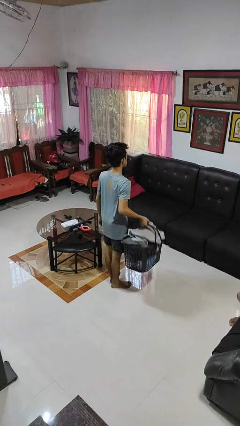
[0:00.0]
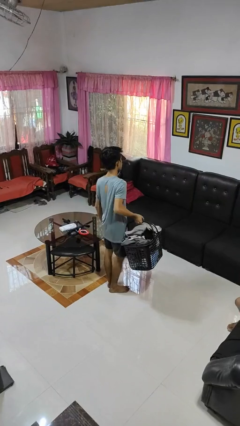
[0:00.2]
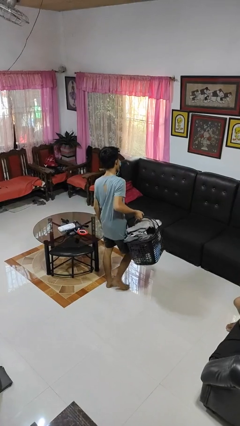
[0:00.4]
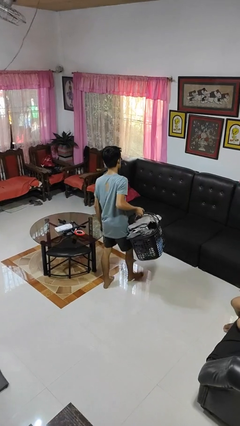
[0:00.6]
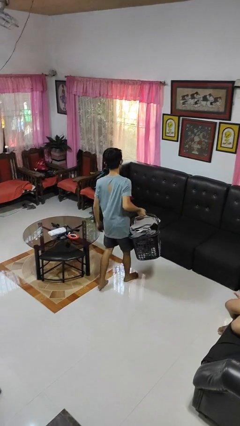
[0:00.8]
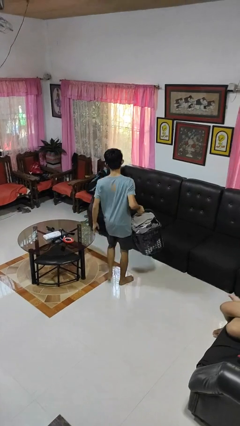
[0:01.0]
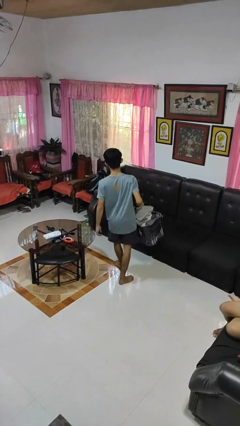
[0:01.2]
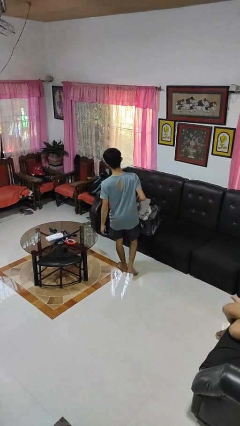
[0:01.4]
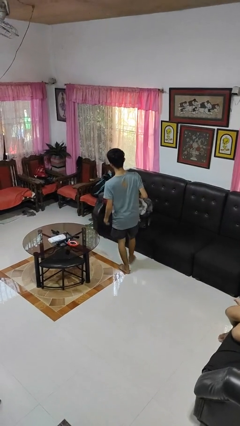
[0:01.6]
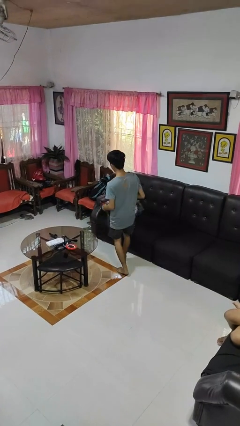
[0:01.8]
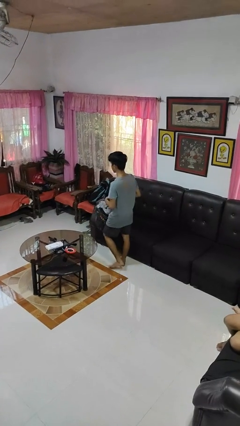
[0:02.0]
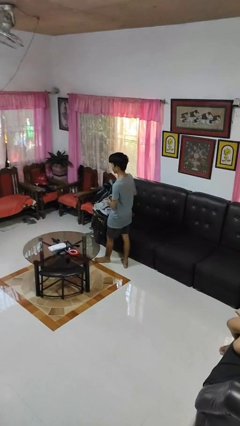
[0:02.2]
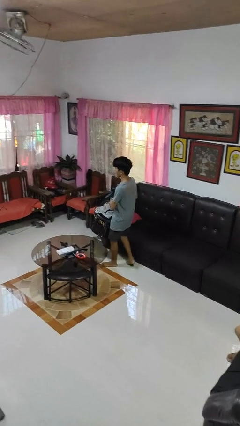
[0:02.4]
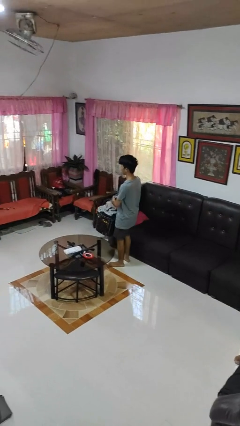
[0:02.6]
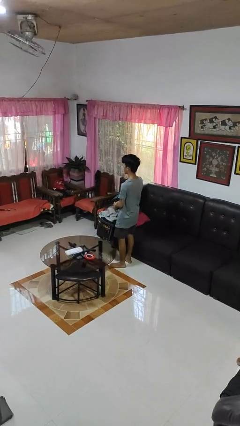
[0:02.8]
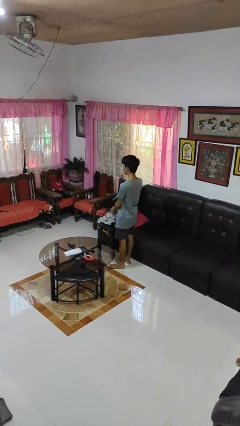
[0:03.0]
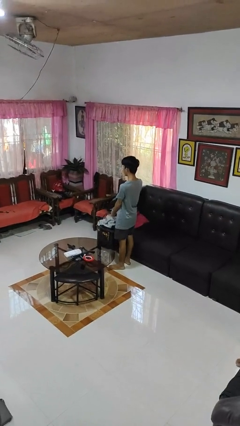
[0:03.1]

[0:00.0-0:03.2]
person carries laundry basket

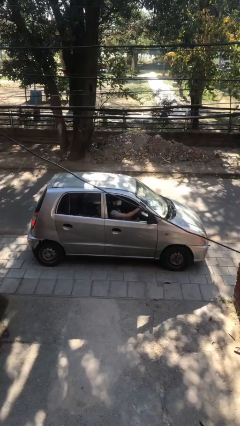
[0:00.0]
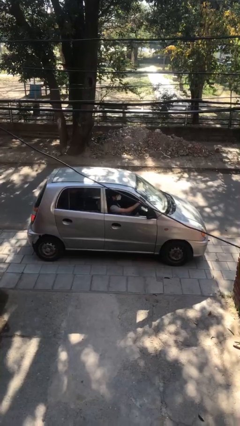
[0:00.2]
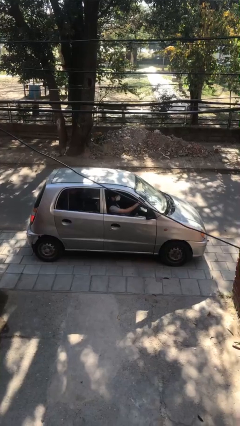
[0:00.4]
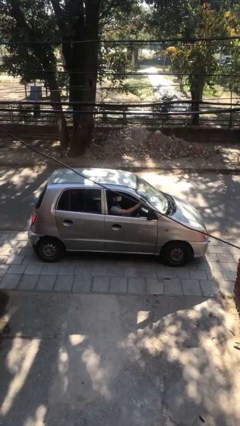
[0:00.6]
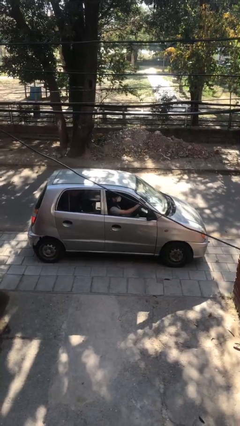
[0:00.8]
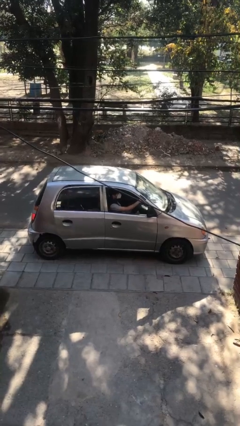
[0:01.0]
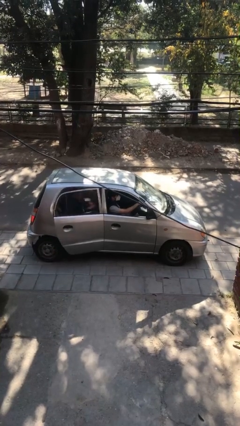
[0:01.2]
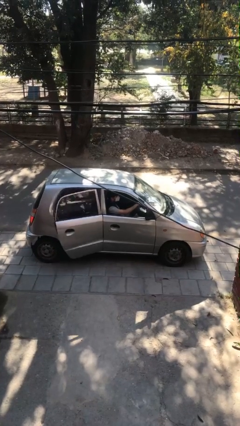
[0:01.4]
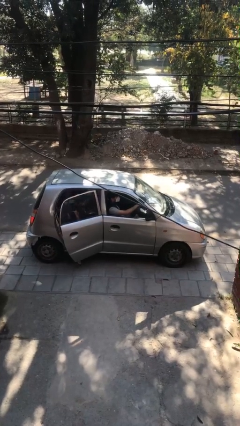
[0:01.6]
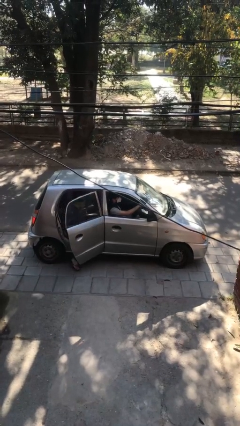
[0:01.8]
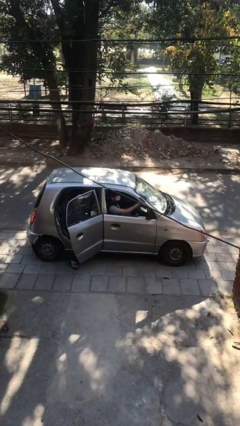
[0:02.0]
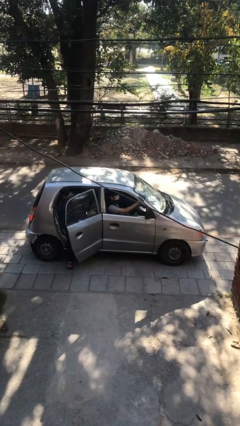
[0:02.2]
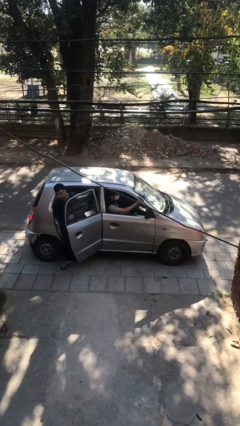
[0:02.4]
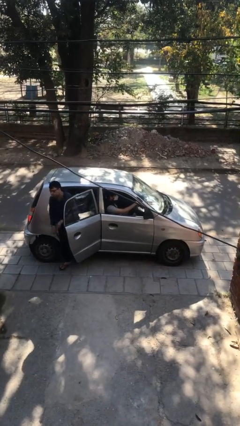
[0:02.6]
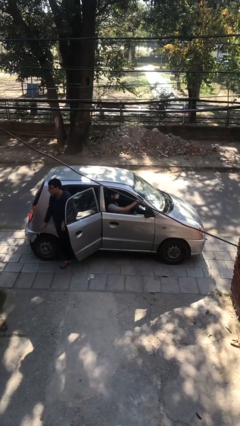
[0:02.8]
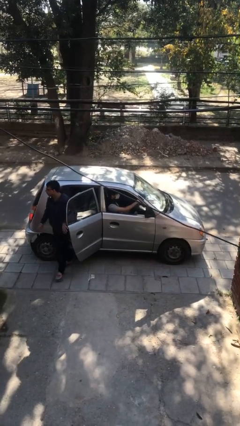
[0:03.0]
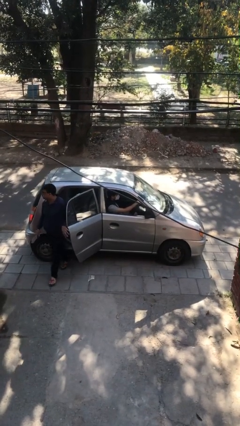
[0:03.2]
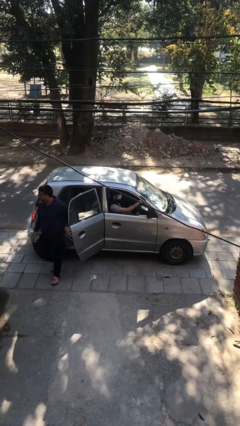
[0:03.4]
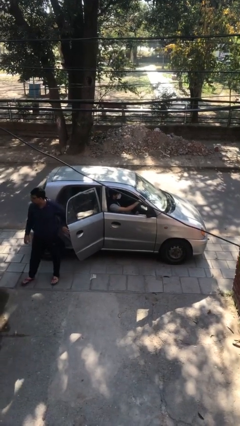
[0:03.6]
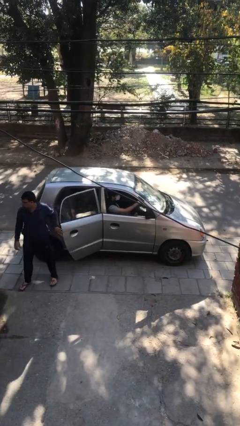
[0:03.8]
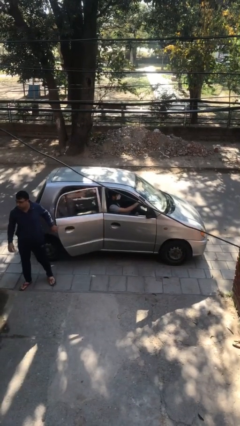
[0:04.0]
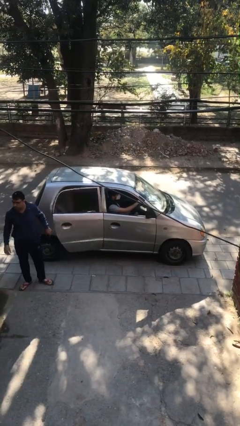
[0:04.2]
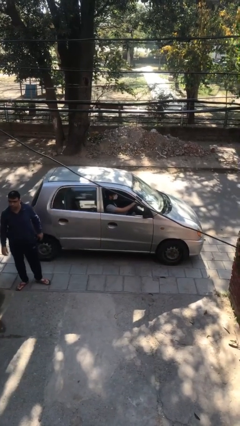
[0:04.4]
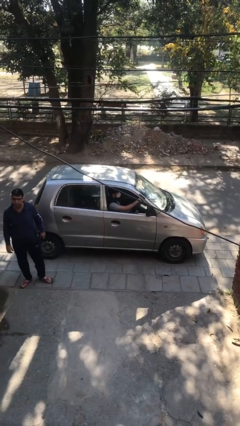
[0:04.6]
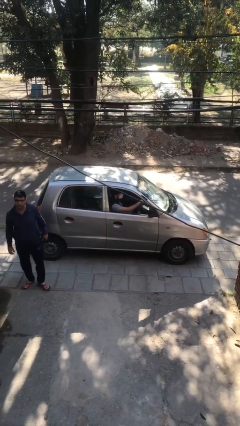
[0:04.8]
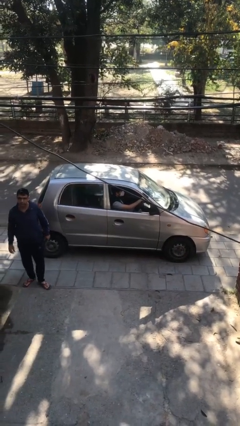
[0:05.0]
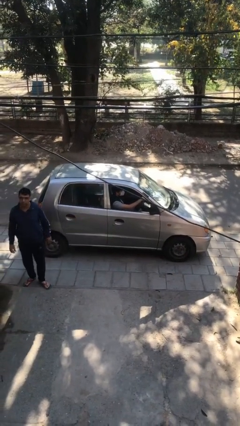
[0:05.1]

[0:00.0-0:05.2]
car drops off person

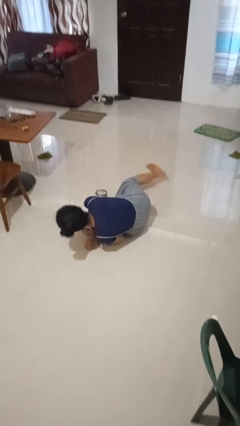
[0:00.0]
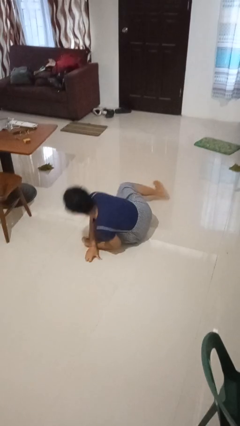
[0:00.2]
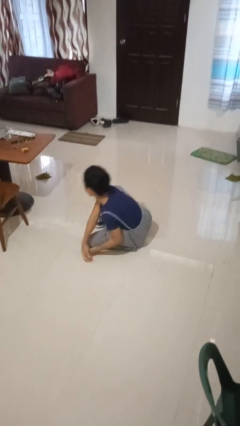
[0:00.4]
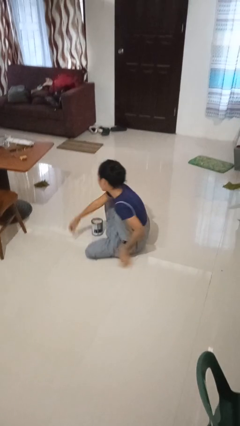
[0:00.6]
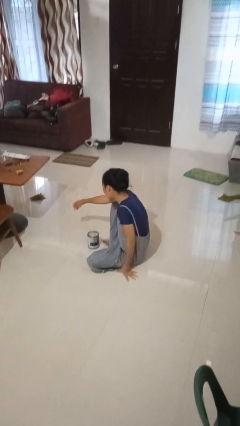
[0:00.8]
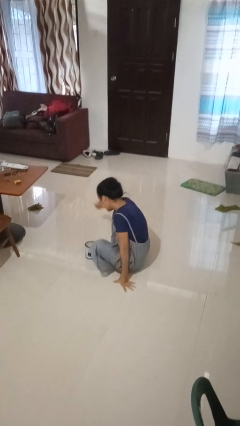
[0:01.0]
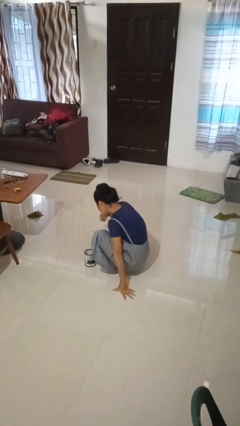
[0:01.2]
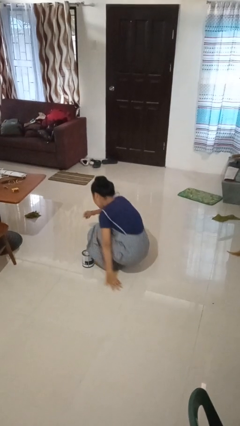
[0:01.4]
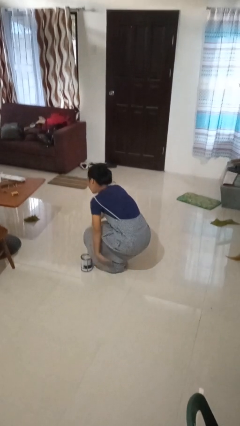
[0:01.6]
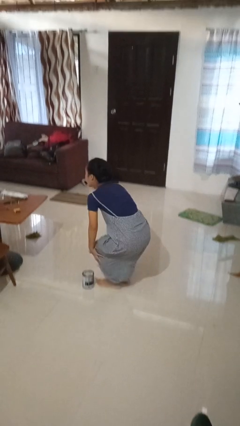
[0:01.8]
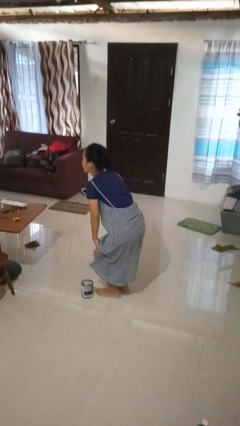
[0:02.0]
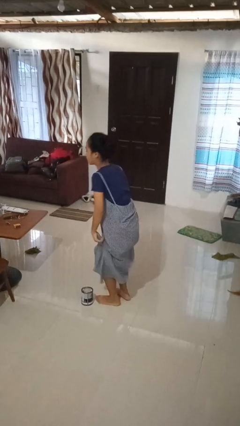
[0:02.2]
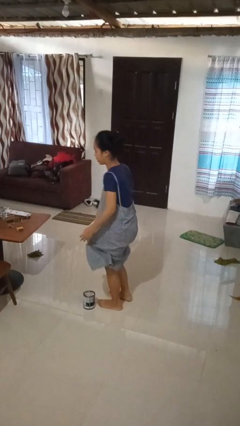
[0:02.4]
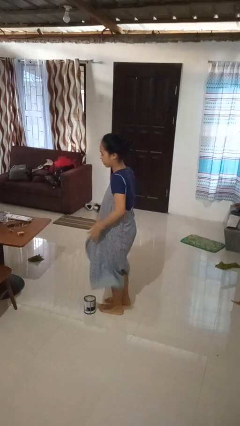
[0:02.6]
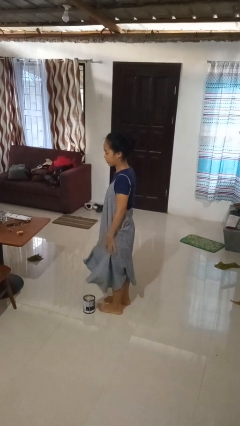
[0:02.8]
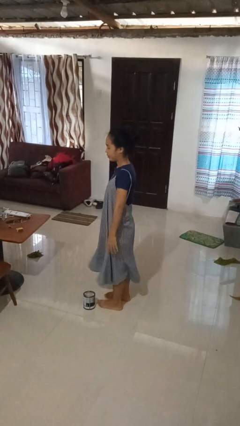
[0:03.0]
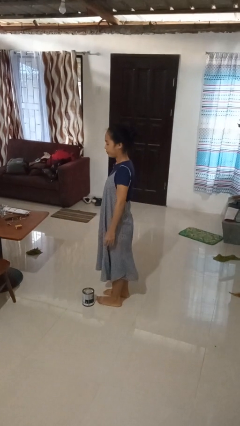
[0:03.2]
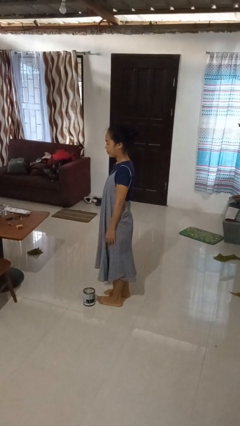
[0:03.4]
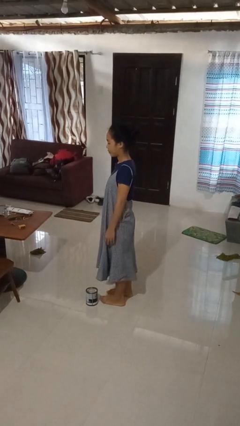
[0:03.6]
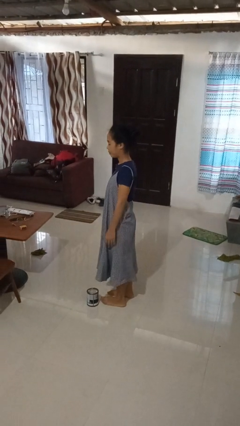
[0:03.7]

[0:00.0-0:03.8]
person stands up from floor

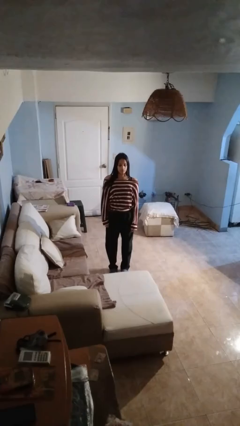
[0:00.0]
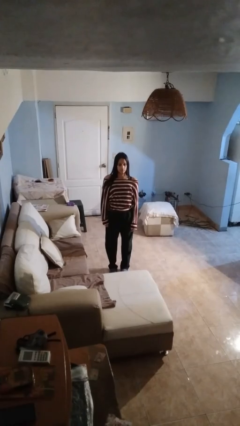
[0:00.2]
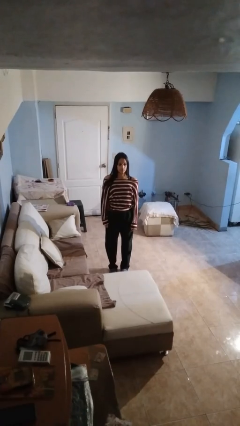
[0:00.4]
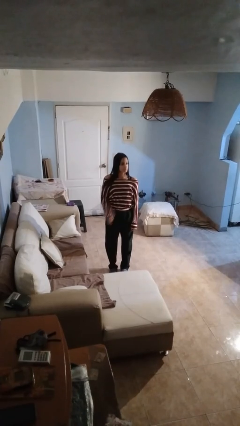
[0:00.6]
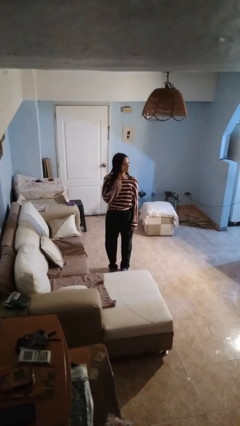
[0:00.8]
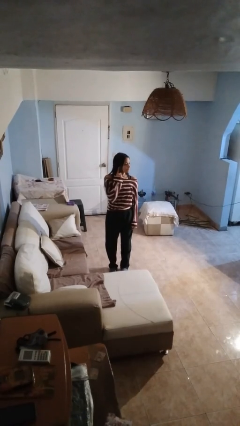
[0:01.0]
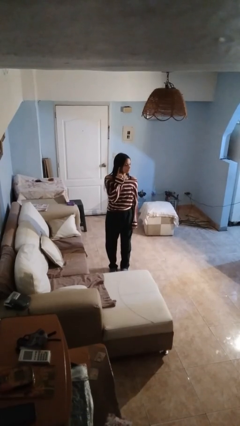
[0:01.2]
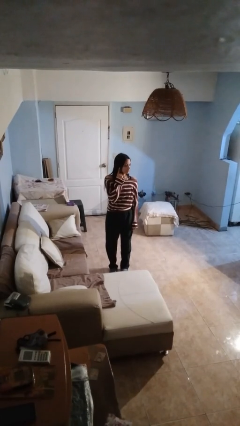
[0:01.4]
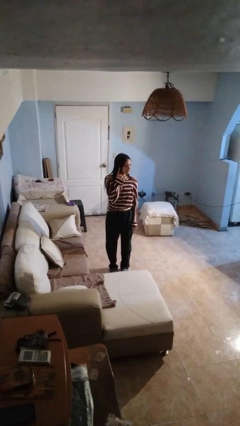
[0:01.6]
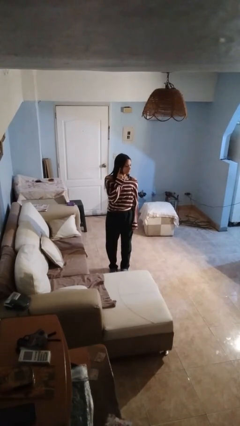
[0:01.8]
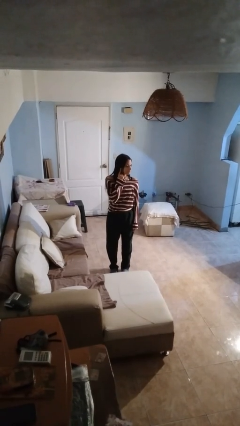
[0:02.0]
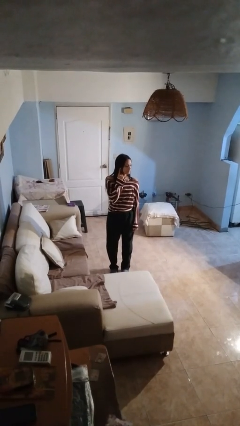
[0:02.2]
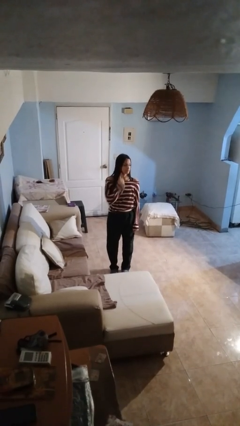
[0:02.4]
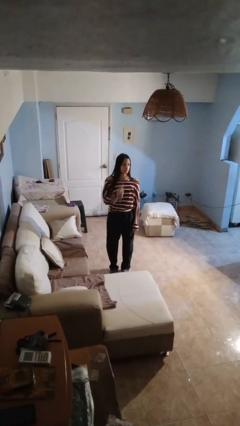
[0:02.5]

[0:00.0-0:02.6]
person gestures listen closely

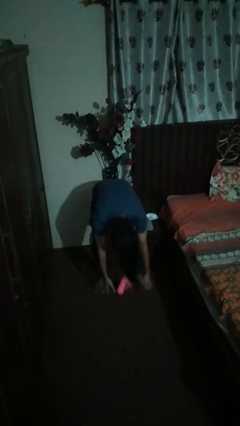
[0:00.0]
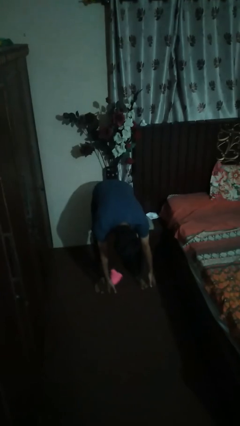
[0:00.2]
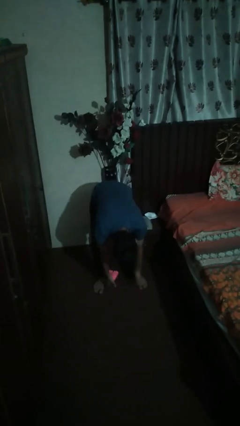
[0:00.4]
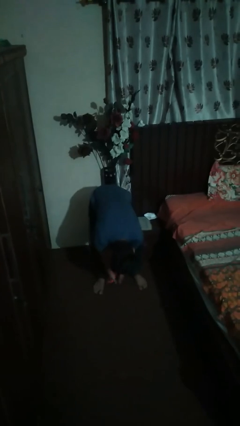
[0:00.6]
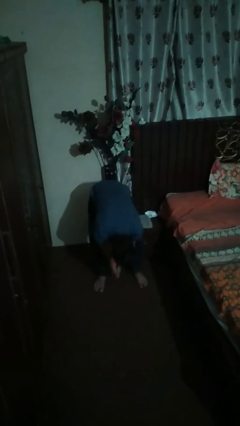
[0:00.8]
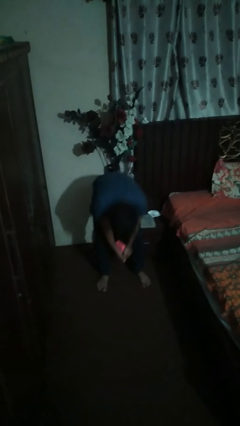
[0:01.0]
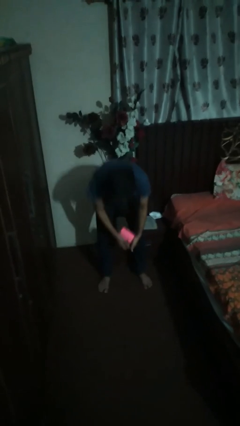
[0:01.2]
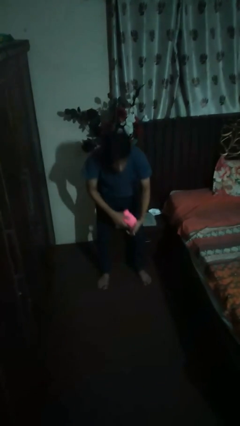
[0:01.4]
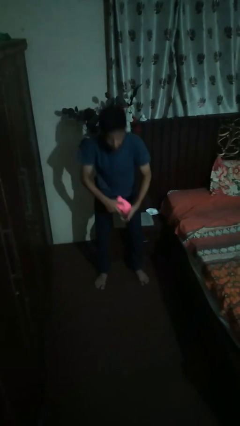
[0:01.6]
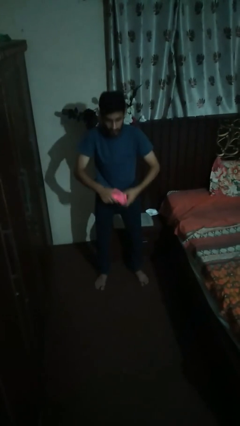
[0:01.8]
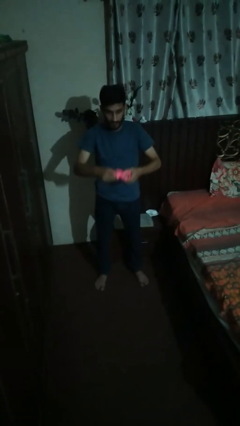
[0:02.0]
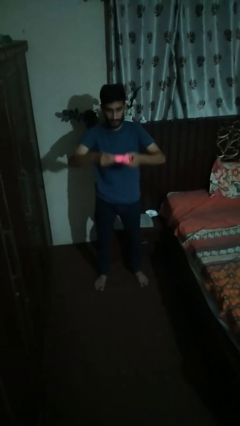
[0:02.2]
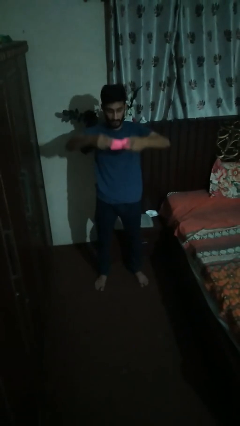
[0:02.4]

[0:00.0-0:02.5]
person picks up object from floor
